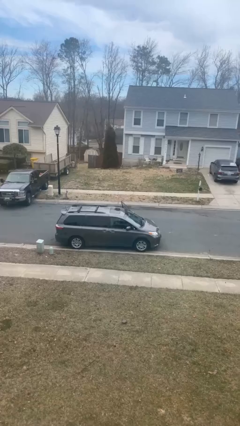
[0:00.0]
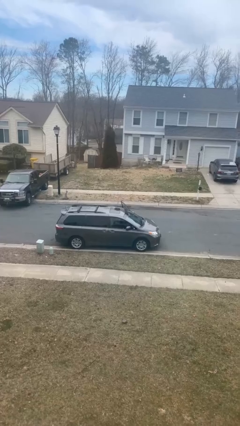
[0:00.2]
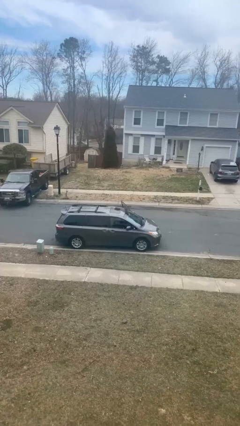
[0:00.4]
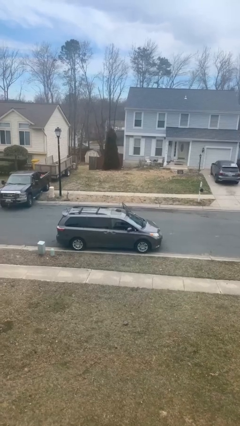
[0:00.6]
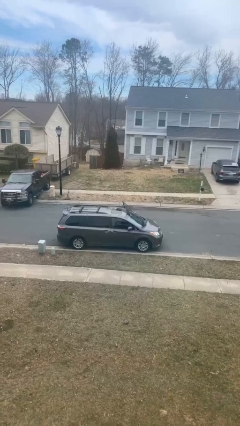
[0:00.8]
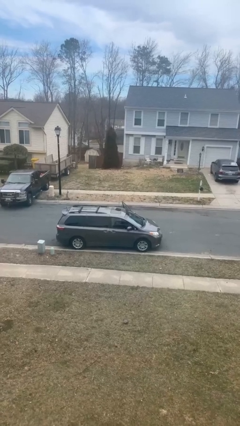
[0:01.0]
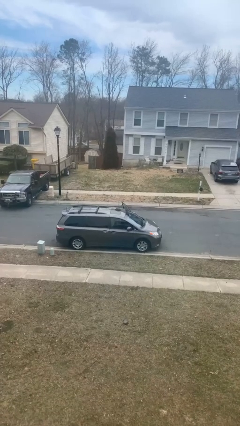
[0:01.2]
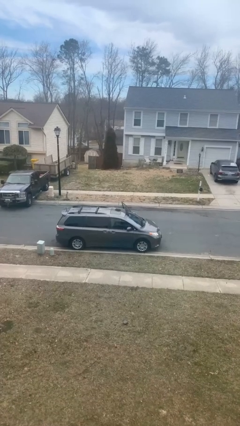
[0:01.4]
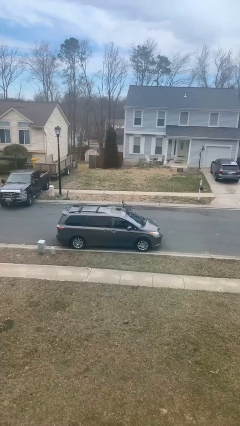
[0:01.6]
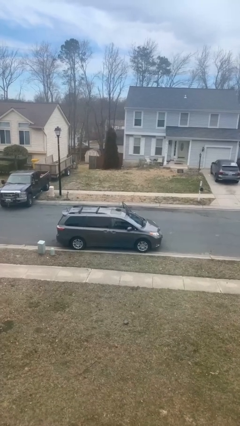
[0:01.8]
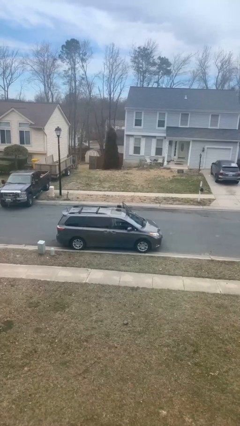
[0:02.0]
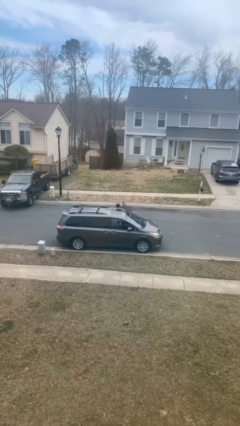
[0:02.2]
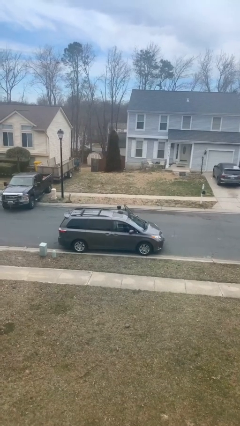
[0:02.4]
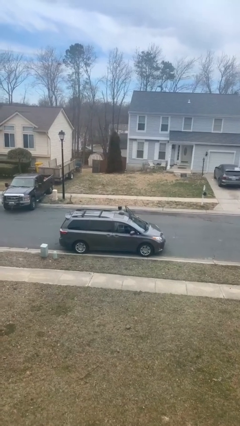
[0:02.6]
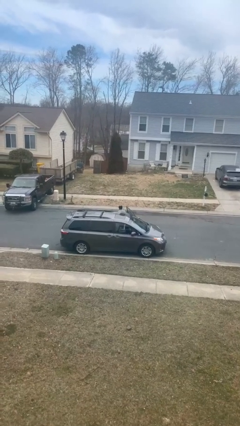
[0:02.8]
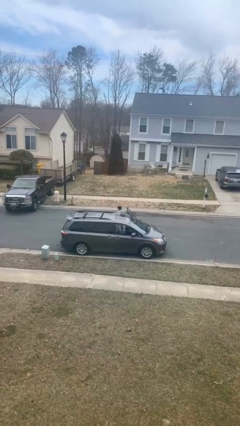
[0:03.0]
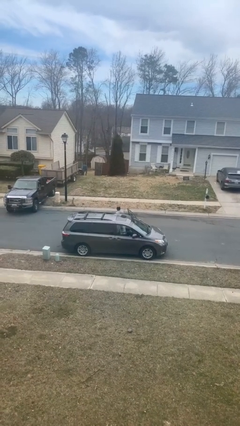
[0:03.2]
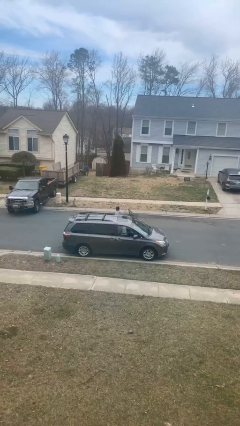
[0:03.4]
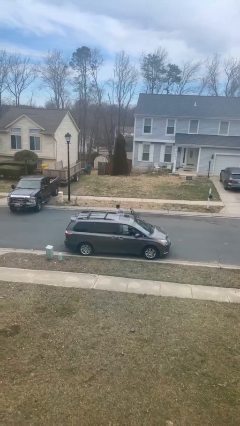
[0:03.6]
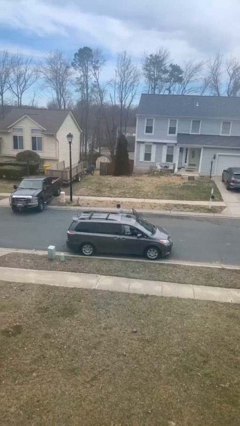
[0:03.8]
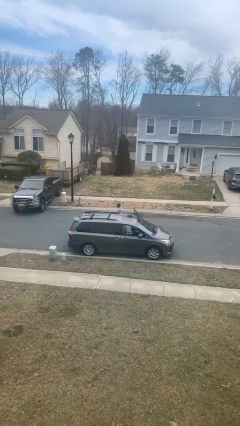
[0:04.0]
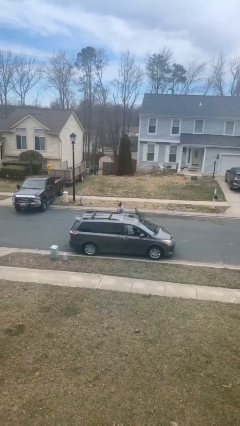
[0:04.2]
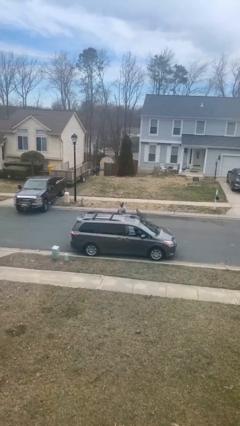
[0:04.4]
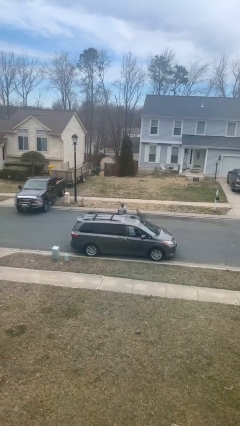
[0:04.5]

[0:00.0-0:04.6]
person exits car

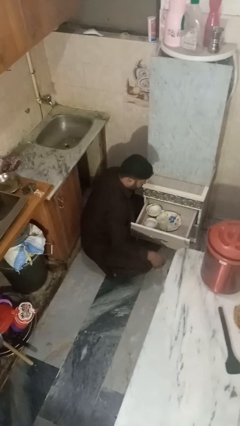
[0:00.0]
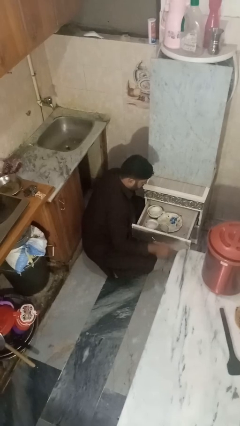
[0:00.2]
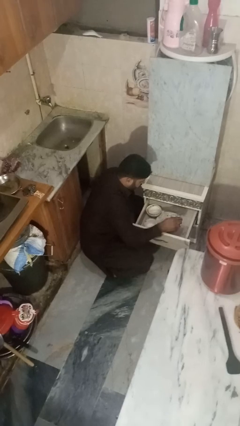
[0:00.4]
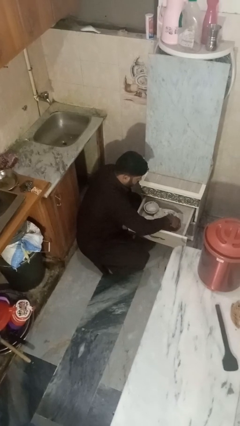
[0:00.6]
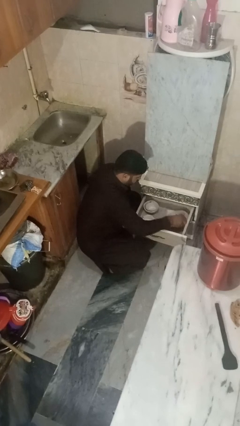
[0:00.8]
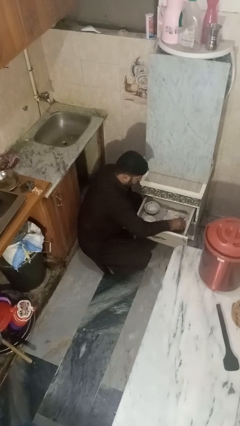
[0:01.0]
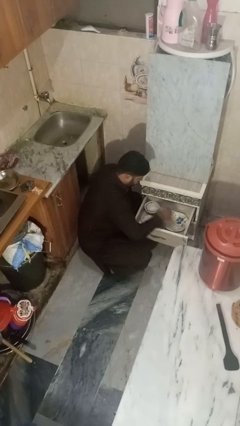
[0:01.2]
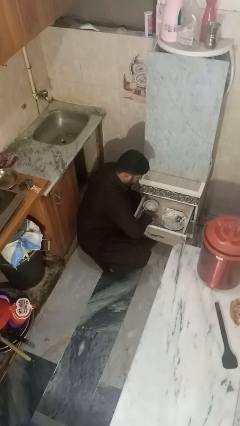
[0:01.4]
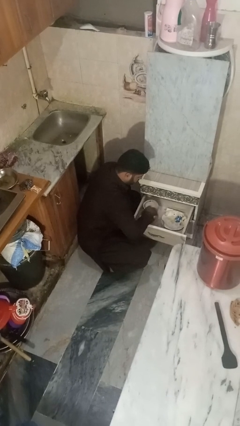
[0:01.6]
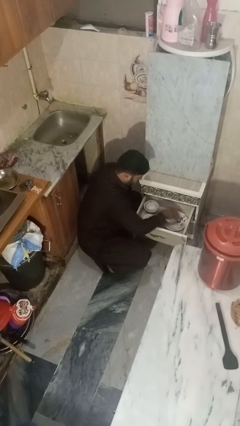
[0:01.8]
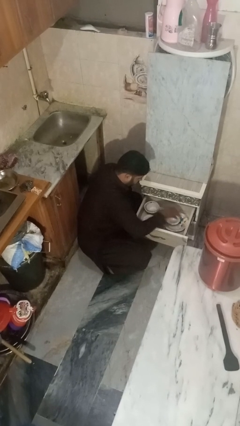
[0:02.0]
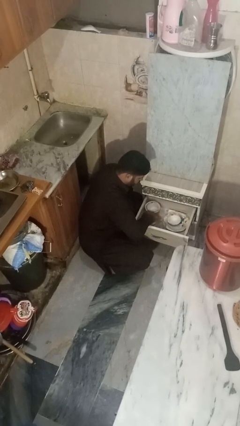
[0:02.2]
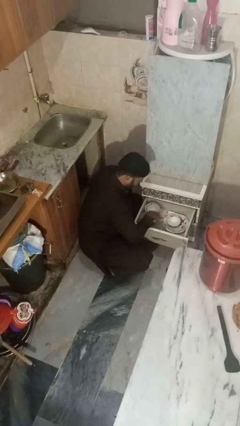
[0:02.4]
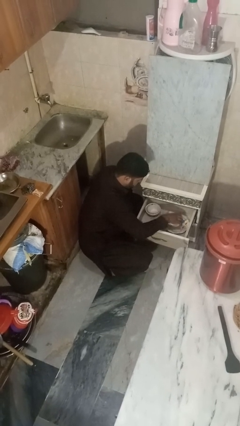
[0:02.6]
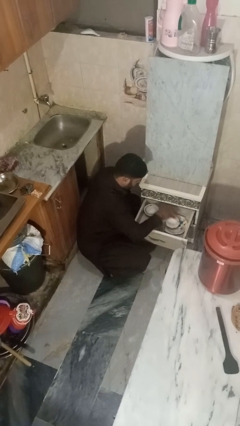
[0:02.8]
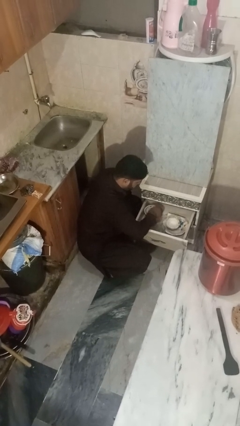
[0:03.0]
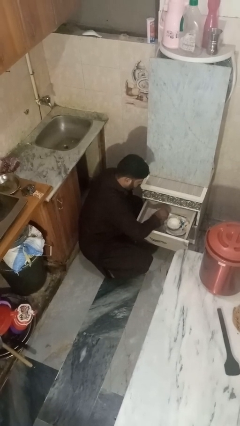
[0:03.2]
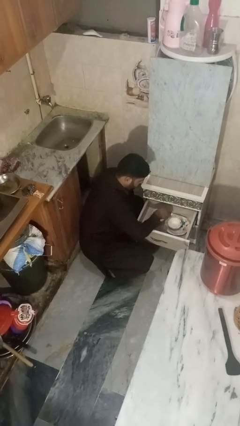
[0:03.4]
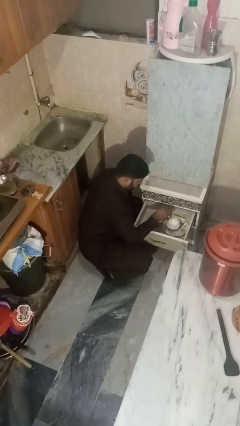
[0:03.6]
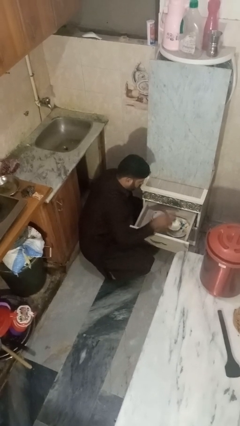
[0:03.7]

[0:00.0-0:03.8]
person searches in kitchen drawer

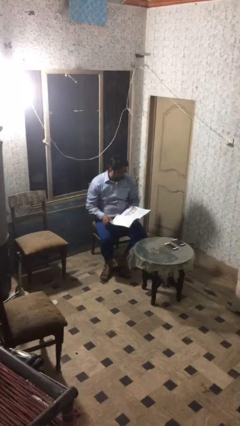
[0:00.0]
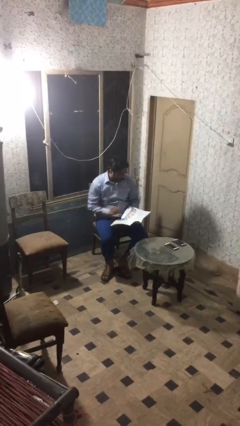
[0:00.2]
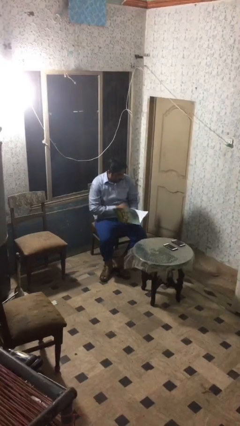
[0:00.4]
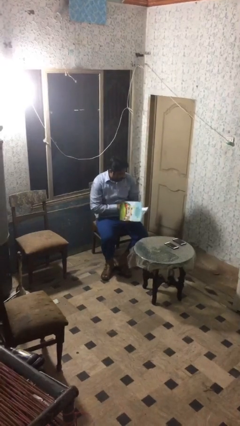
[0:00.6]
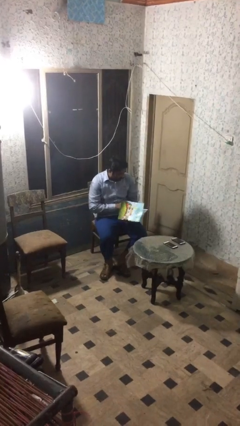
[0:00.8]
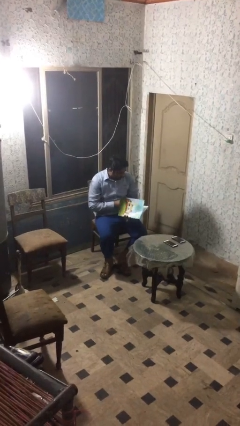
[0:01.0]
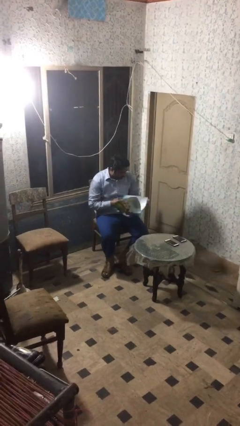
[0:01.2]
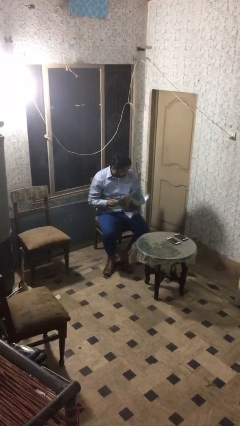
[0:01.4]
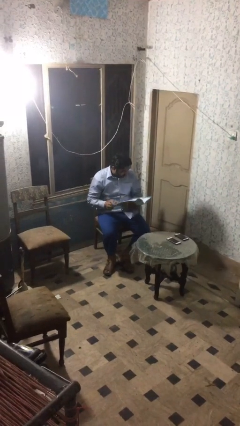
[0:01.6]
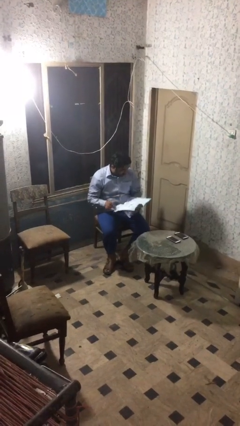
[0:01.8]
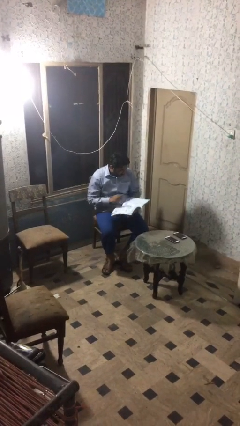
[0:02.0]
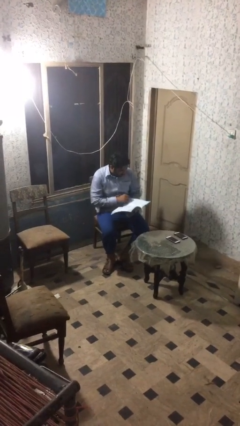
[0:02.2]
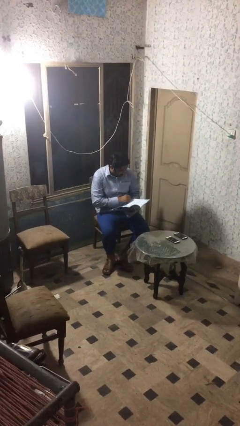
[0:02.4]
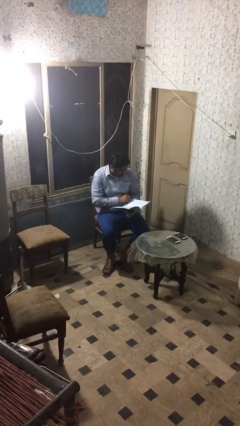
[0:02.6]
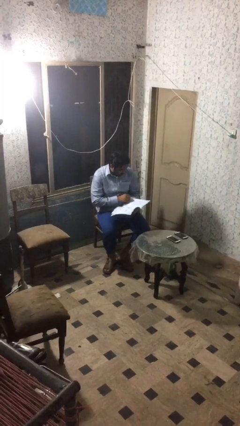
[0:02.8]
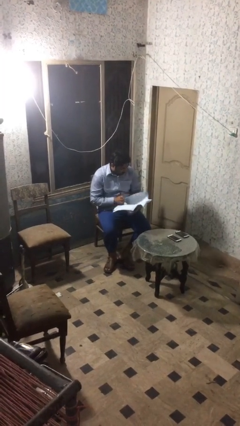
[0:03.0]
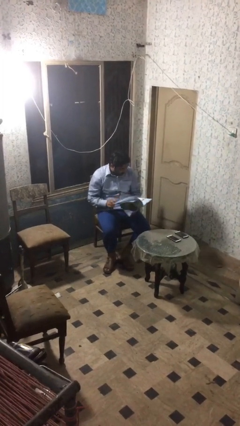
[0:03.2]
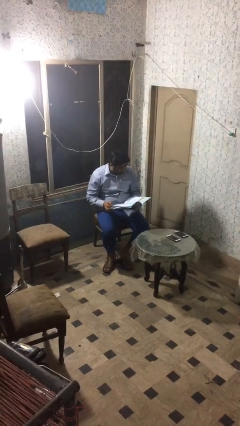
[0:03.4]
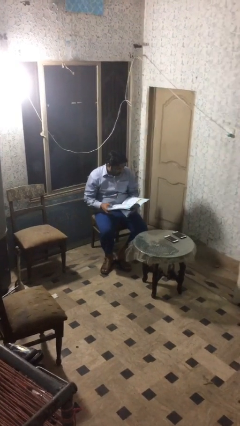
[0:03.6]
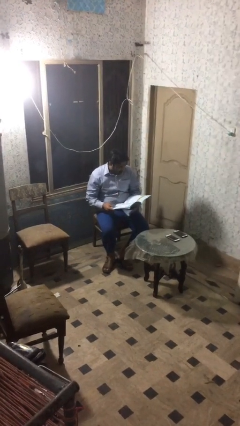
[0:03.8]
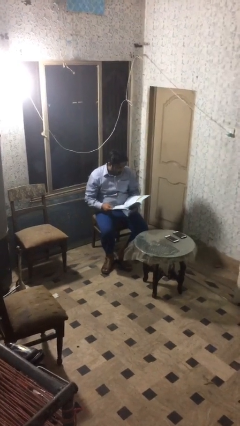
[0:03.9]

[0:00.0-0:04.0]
person reads document

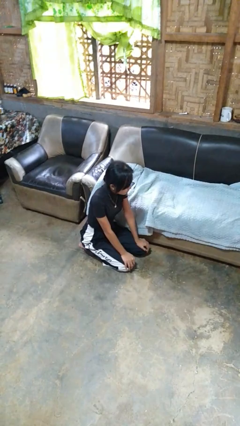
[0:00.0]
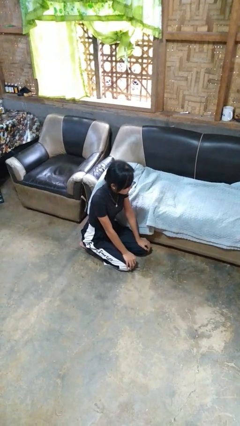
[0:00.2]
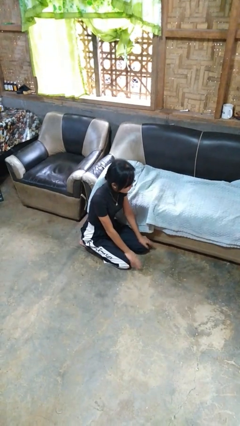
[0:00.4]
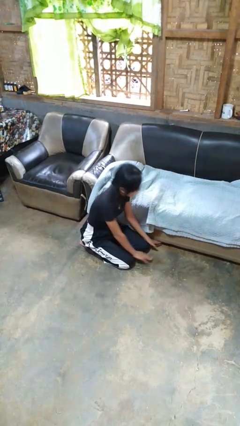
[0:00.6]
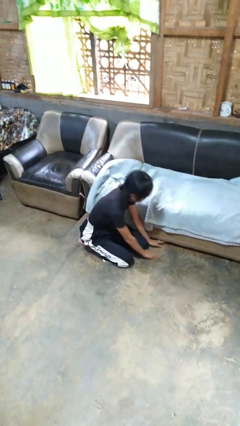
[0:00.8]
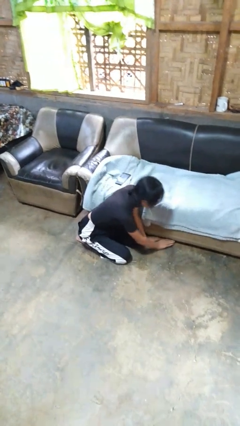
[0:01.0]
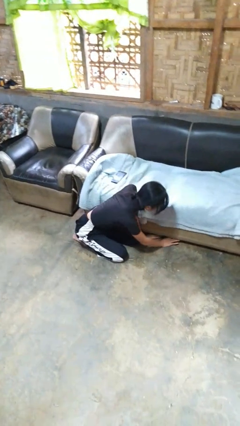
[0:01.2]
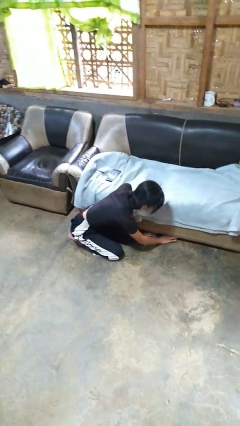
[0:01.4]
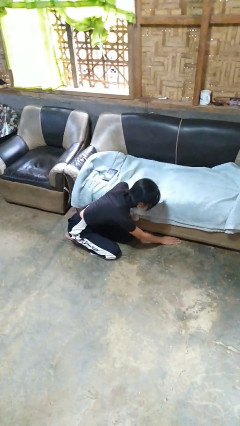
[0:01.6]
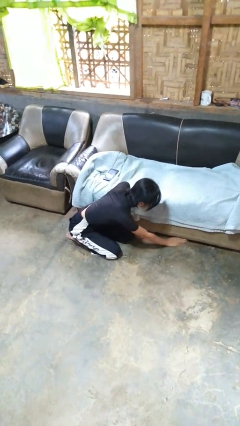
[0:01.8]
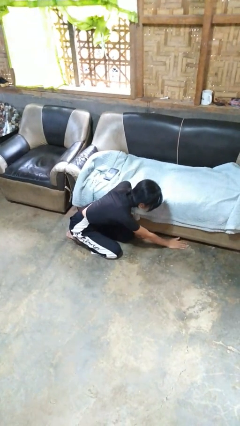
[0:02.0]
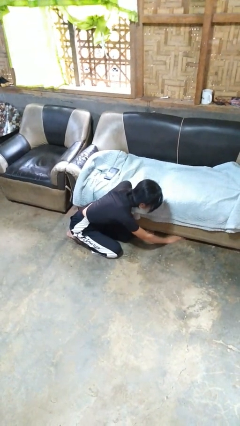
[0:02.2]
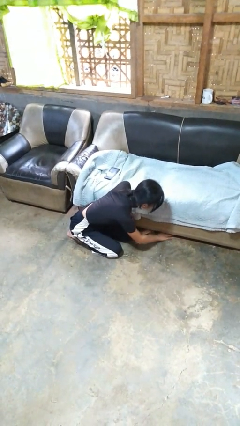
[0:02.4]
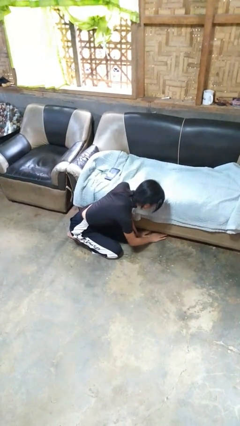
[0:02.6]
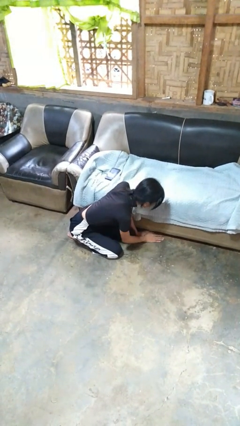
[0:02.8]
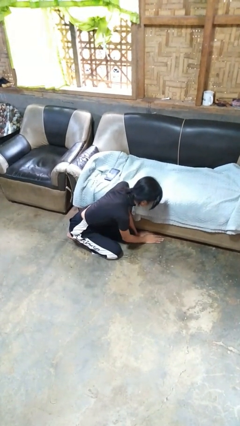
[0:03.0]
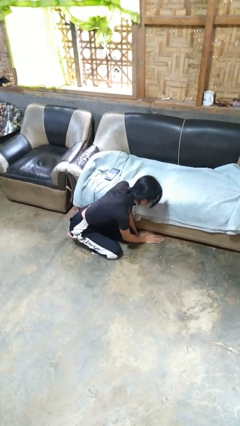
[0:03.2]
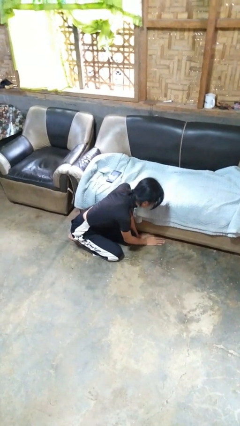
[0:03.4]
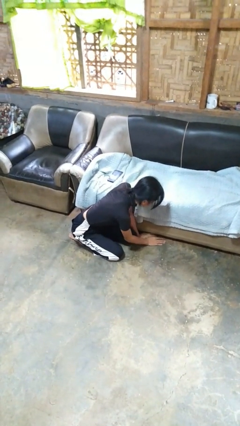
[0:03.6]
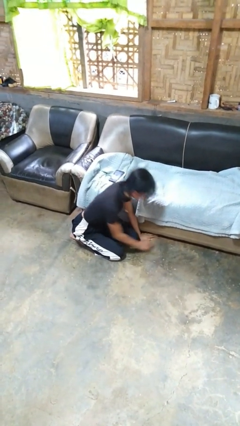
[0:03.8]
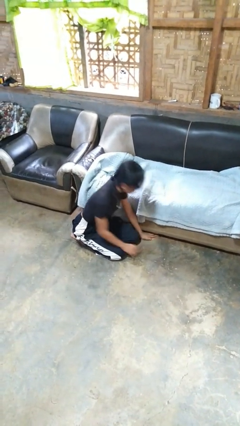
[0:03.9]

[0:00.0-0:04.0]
person searches under couch

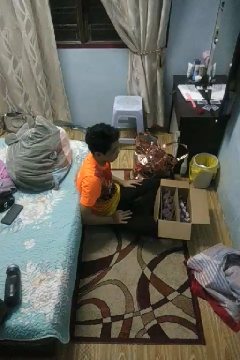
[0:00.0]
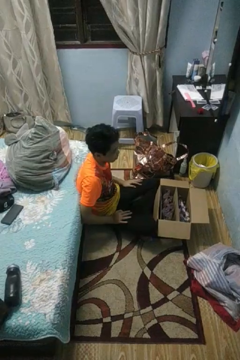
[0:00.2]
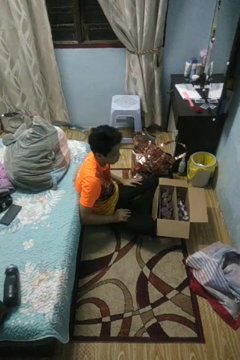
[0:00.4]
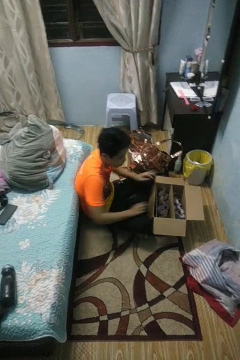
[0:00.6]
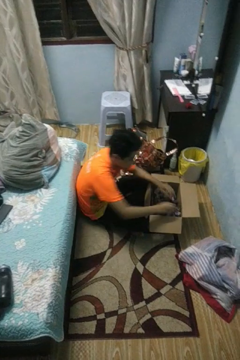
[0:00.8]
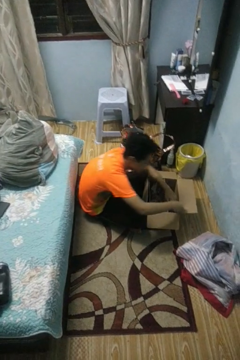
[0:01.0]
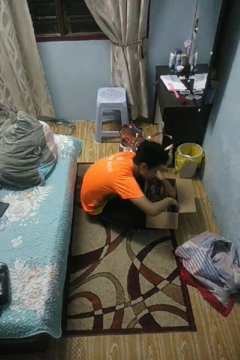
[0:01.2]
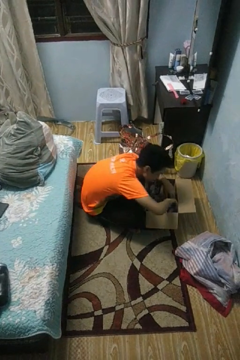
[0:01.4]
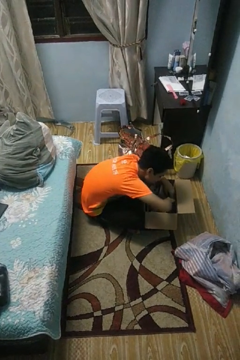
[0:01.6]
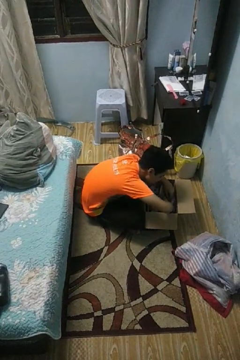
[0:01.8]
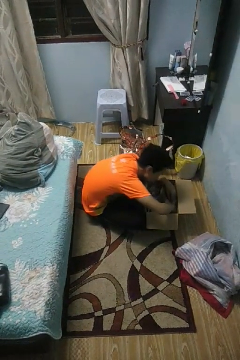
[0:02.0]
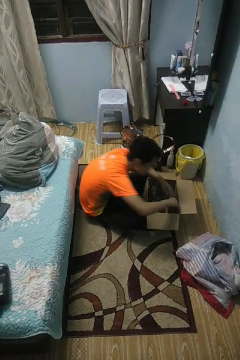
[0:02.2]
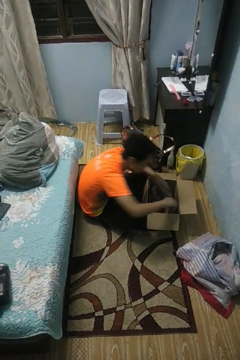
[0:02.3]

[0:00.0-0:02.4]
person searches in box
